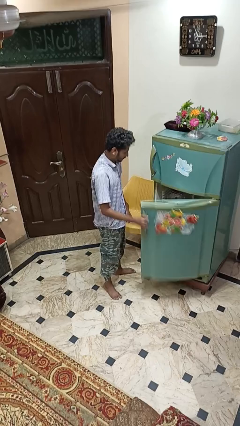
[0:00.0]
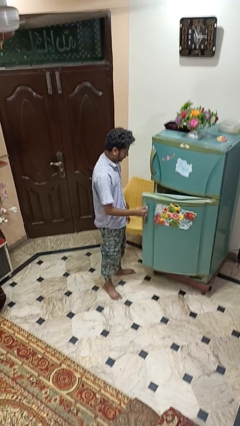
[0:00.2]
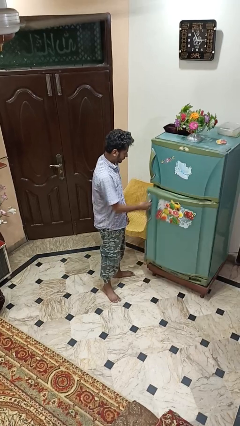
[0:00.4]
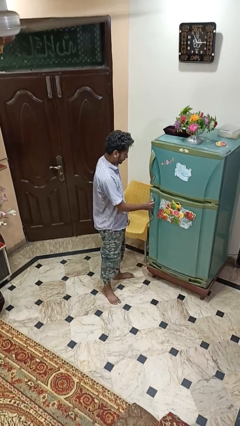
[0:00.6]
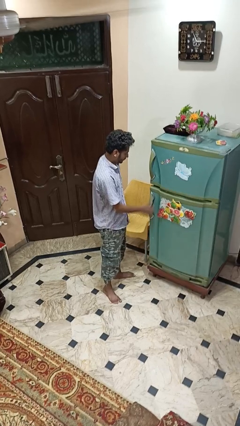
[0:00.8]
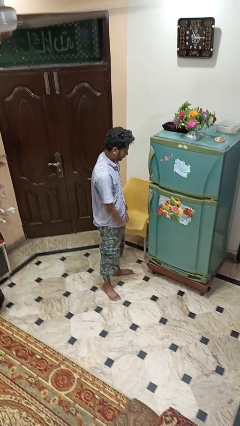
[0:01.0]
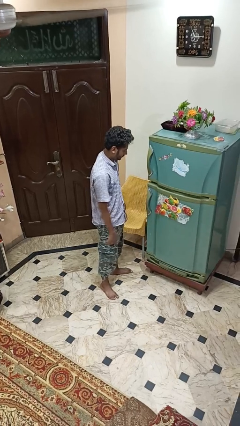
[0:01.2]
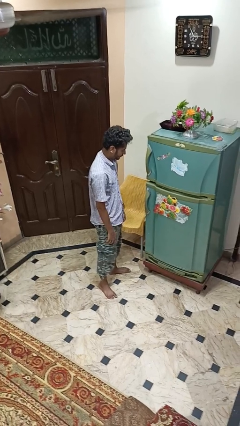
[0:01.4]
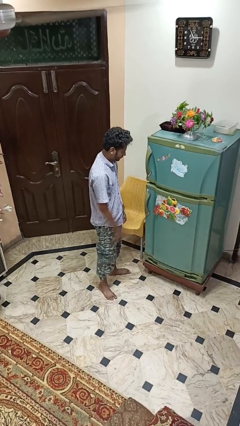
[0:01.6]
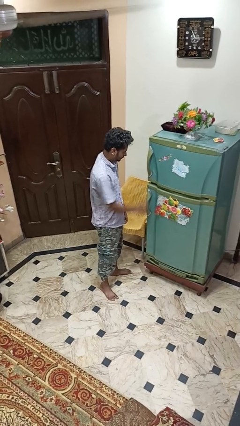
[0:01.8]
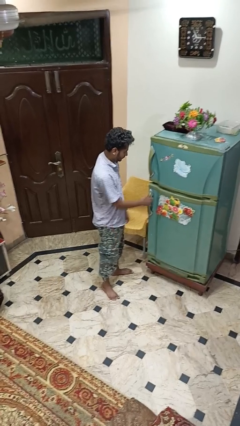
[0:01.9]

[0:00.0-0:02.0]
person closes refrigerator

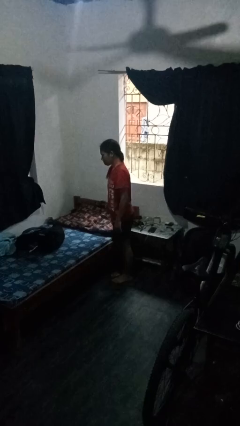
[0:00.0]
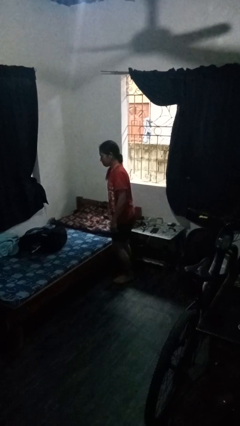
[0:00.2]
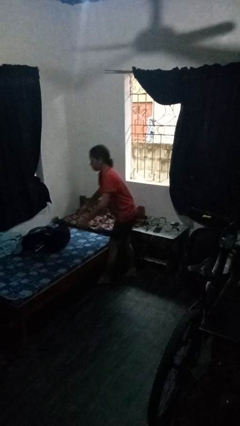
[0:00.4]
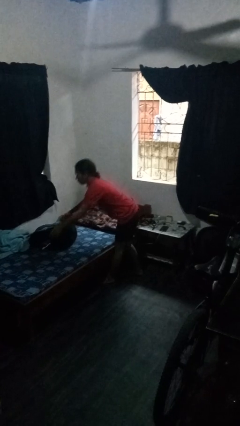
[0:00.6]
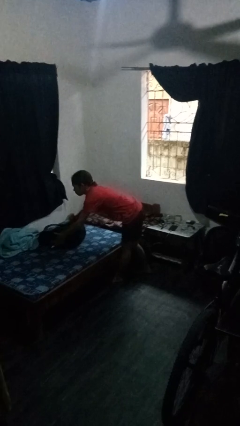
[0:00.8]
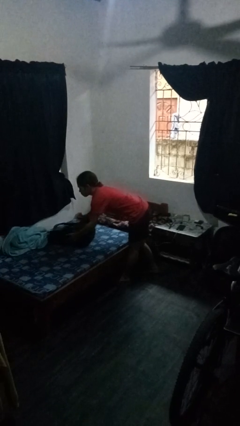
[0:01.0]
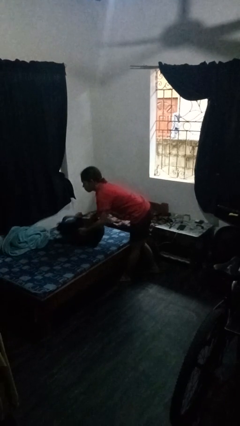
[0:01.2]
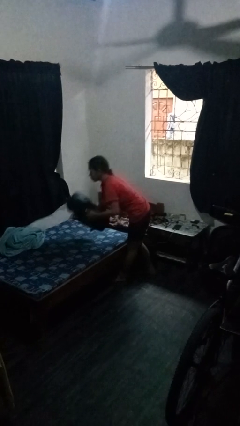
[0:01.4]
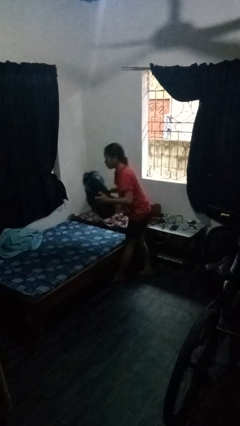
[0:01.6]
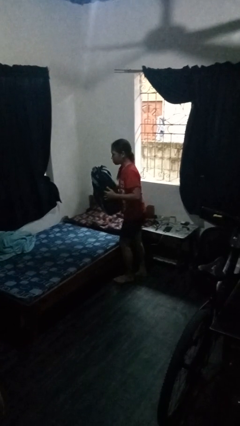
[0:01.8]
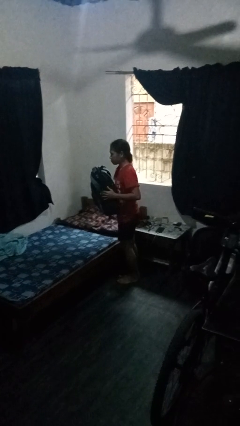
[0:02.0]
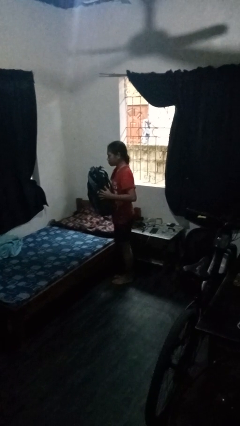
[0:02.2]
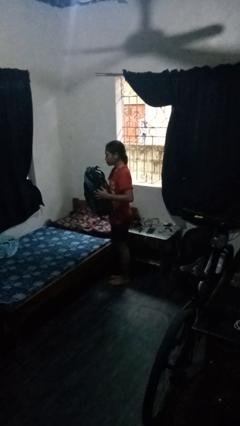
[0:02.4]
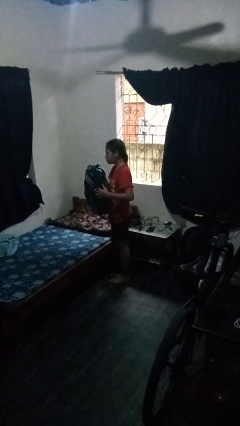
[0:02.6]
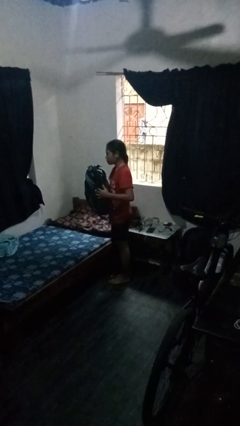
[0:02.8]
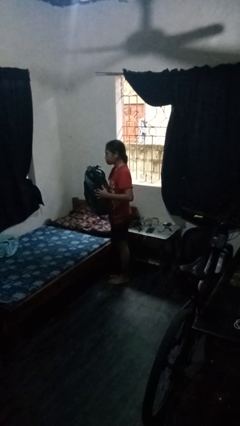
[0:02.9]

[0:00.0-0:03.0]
person picks up object from bed

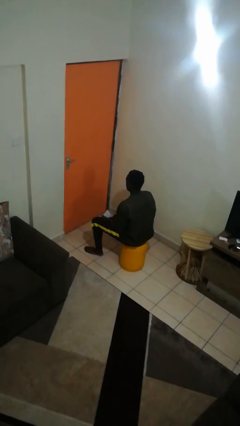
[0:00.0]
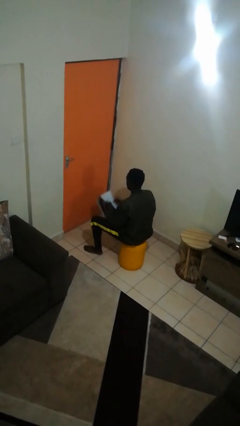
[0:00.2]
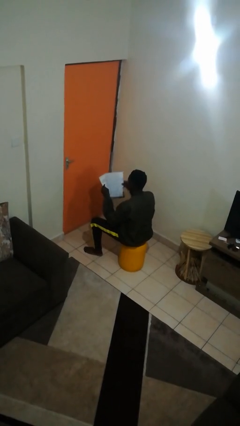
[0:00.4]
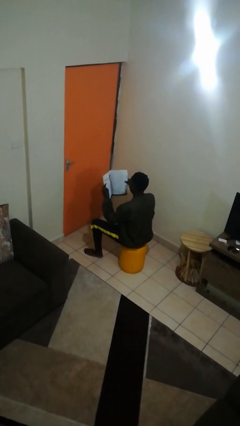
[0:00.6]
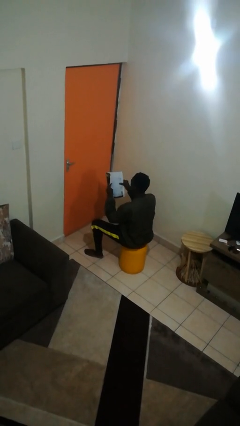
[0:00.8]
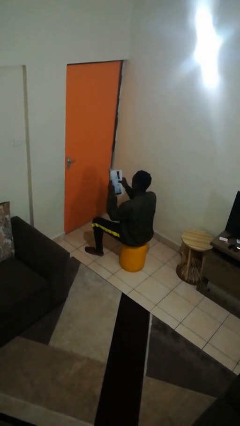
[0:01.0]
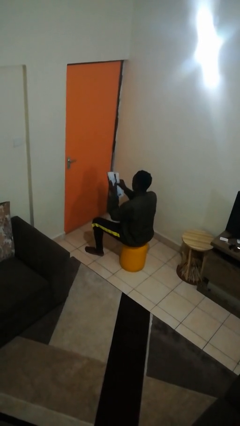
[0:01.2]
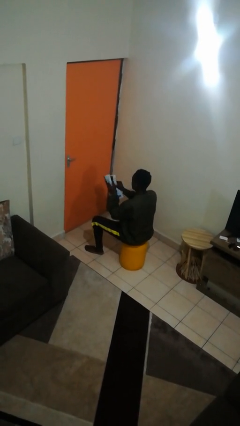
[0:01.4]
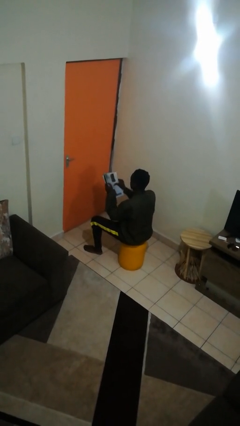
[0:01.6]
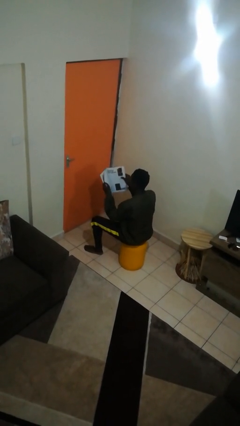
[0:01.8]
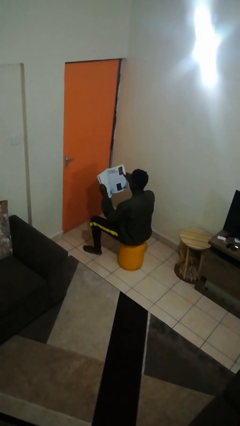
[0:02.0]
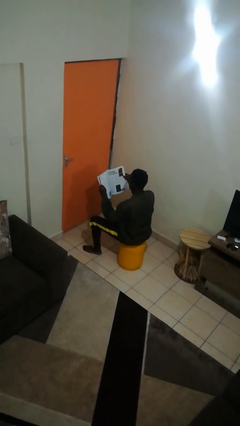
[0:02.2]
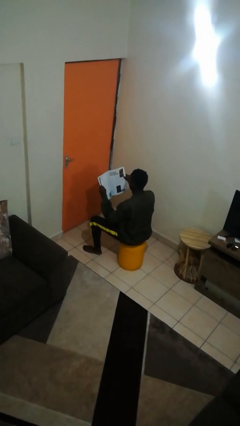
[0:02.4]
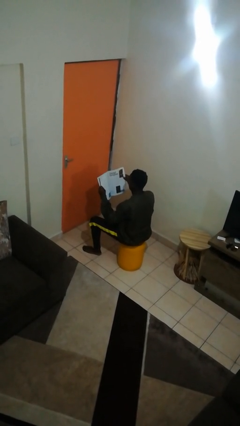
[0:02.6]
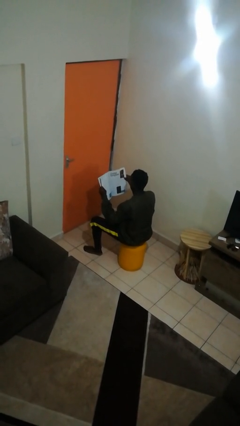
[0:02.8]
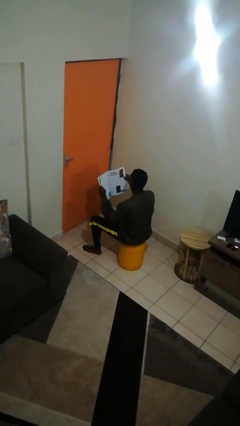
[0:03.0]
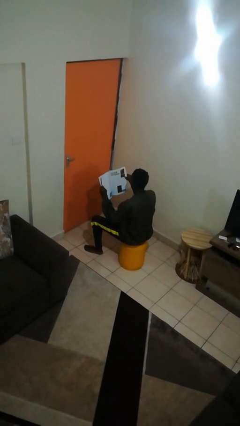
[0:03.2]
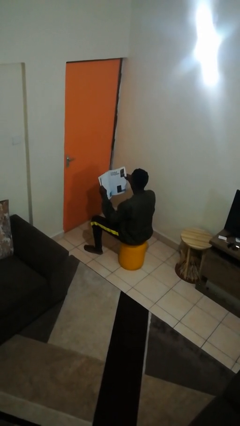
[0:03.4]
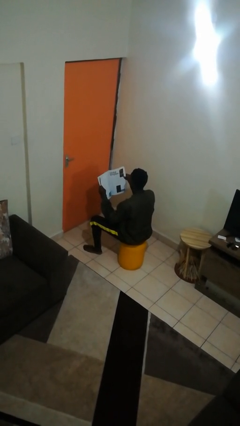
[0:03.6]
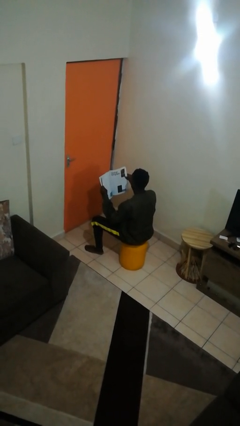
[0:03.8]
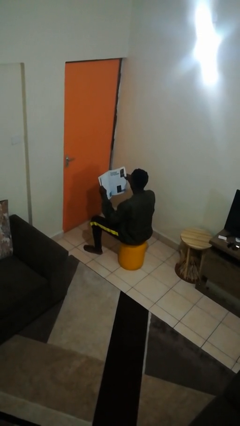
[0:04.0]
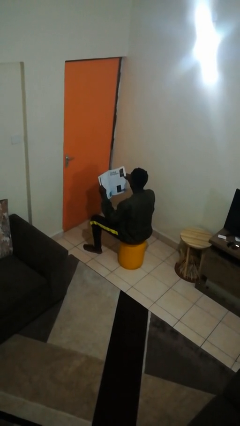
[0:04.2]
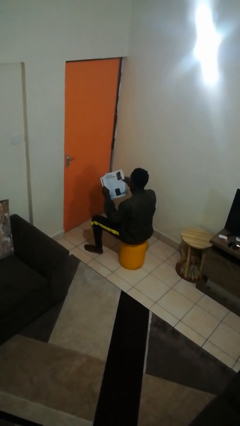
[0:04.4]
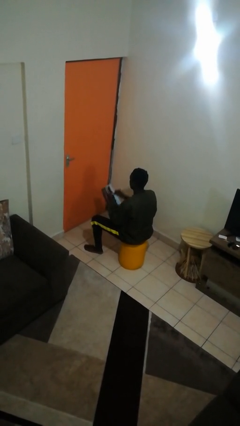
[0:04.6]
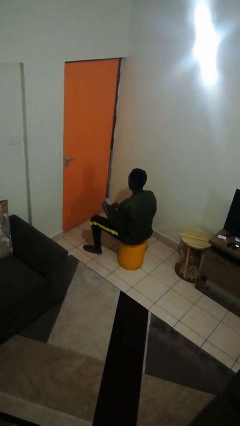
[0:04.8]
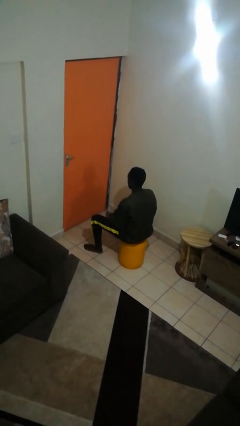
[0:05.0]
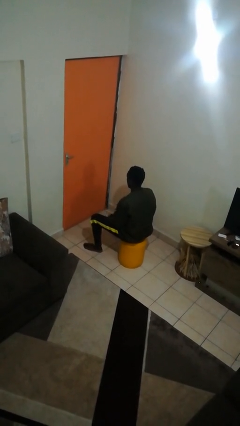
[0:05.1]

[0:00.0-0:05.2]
person reads magazine

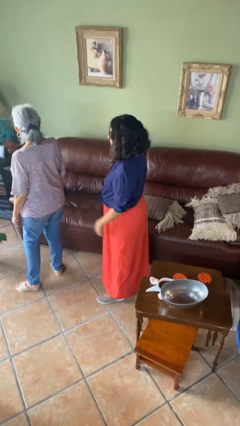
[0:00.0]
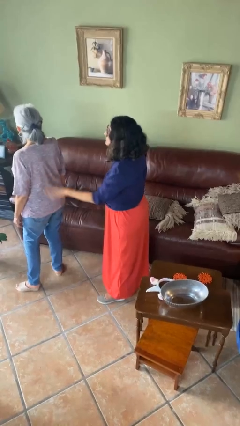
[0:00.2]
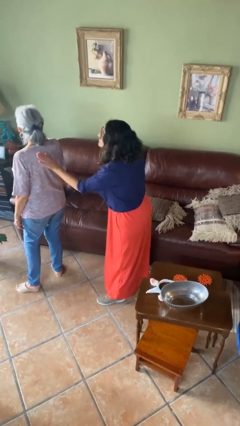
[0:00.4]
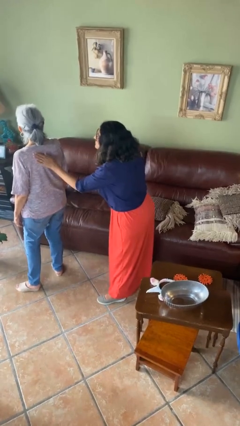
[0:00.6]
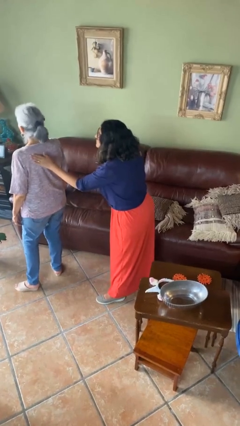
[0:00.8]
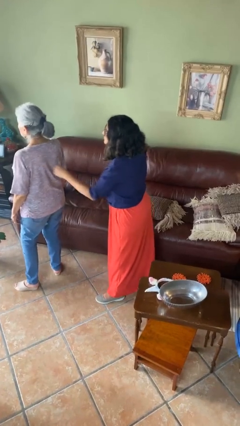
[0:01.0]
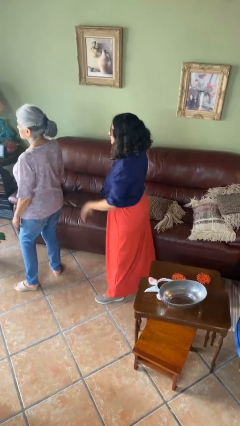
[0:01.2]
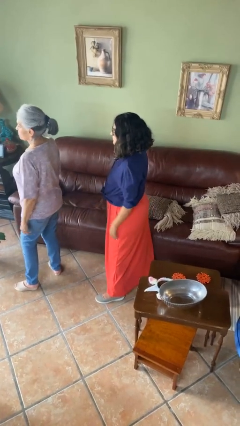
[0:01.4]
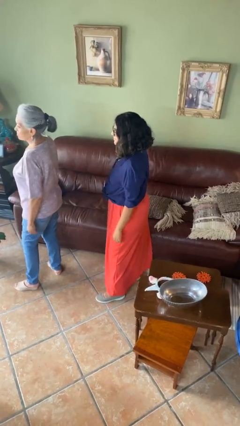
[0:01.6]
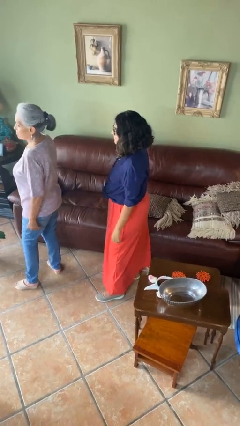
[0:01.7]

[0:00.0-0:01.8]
person touches back of person

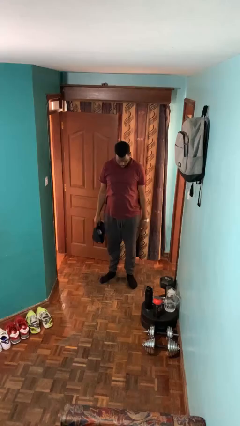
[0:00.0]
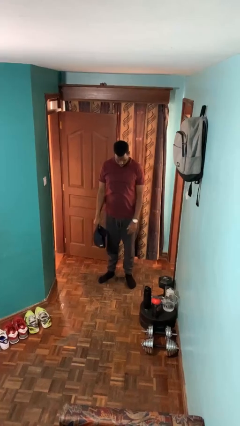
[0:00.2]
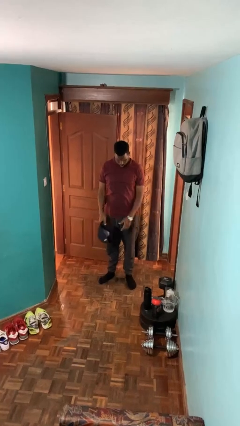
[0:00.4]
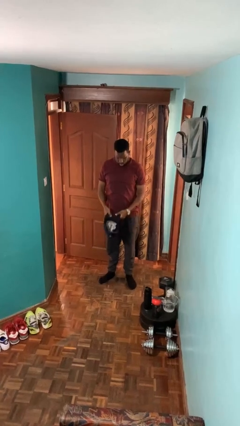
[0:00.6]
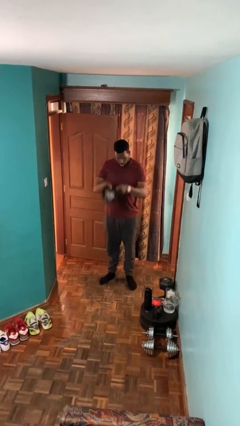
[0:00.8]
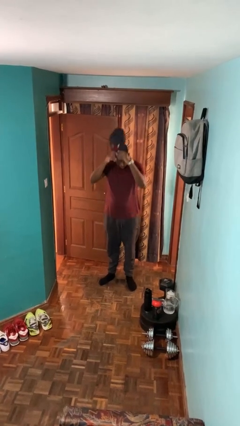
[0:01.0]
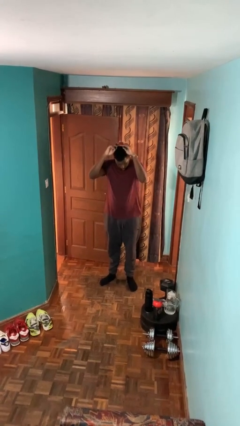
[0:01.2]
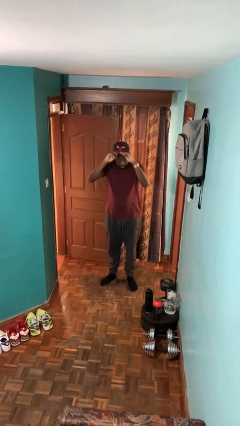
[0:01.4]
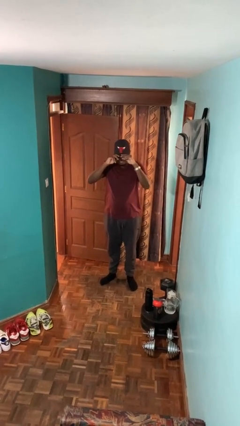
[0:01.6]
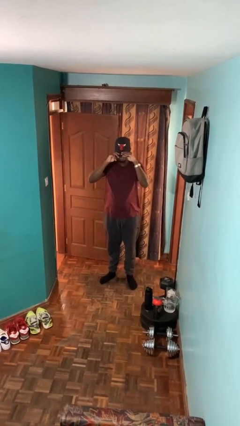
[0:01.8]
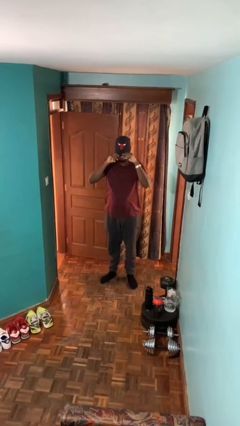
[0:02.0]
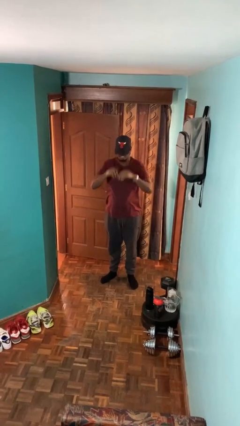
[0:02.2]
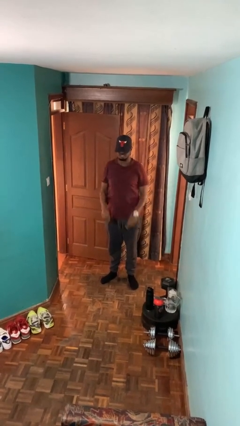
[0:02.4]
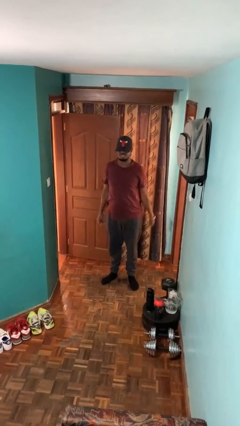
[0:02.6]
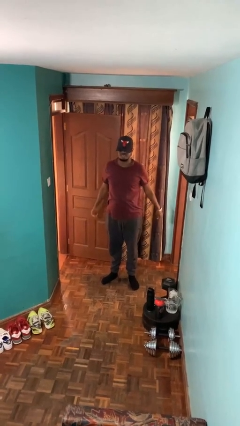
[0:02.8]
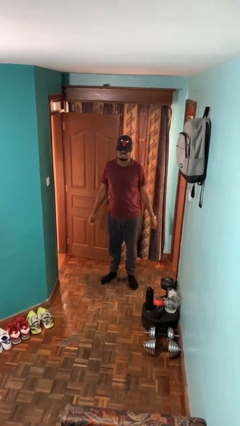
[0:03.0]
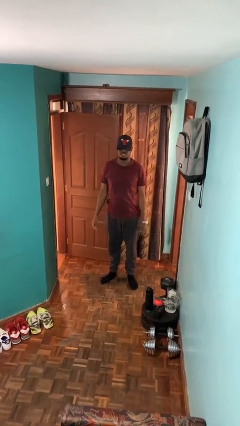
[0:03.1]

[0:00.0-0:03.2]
person puts on hat

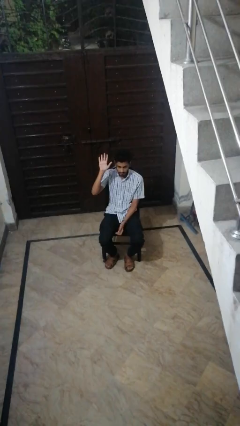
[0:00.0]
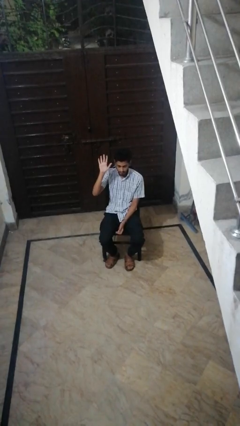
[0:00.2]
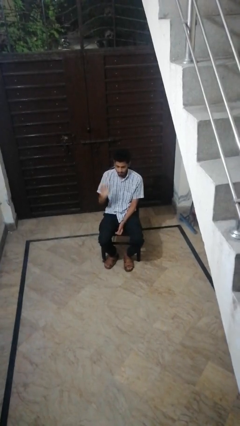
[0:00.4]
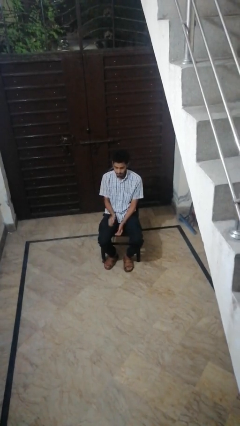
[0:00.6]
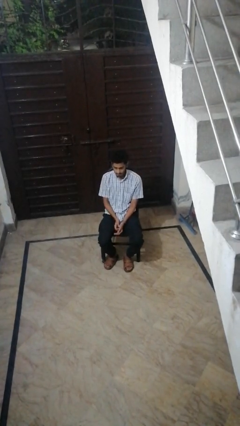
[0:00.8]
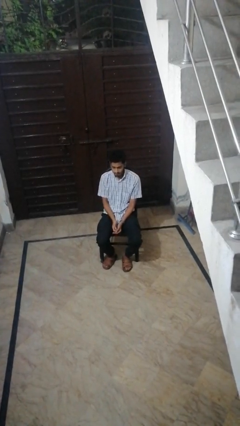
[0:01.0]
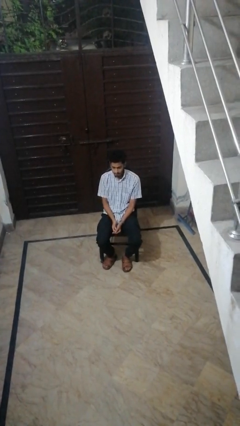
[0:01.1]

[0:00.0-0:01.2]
person gestures lower hand

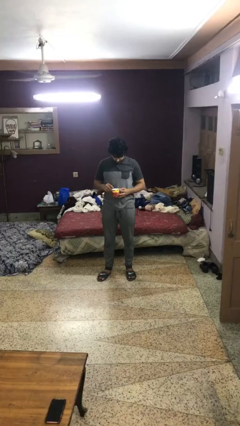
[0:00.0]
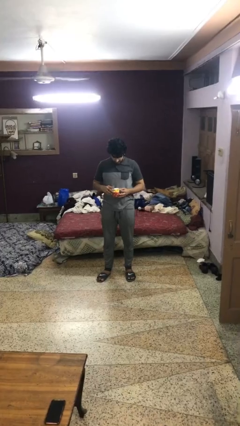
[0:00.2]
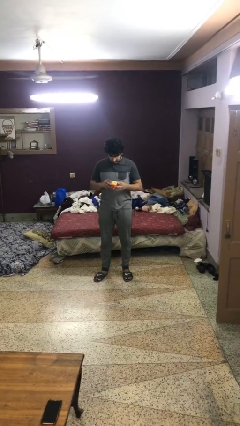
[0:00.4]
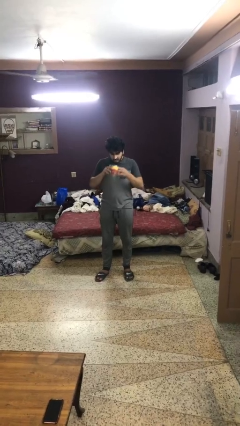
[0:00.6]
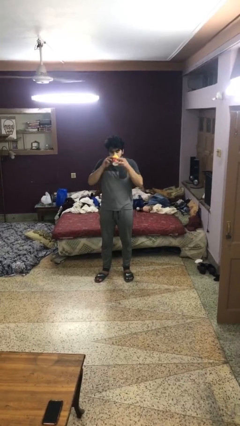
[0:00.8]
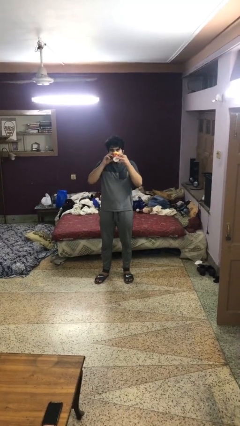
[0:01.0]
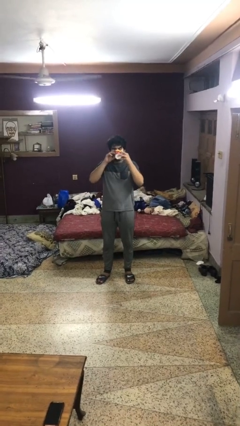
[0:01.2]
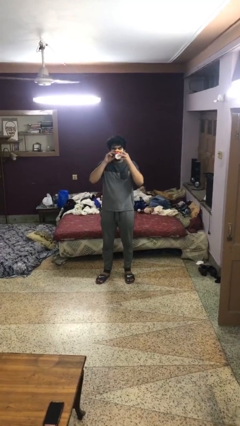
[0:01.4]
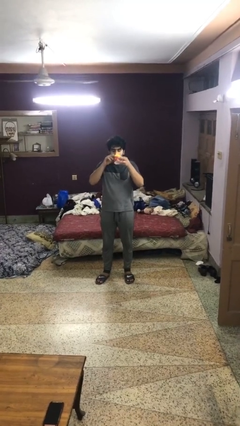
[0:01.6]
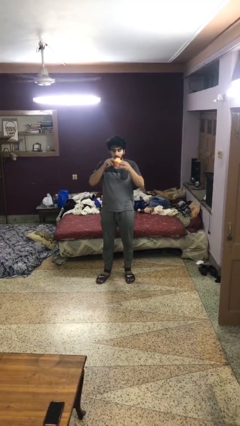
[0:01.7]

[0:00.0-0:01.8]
person drinks from mug
